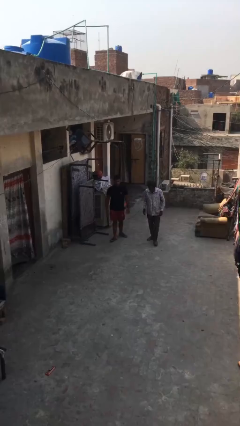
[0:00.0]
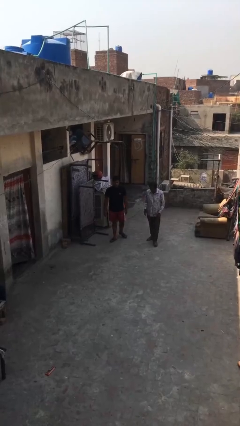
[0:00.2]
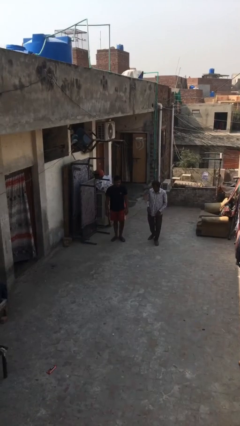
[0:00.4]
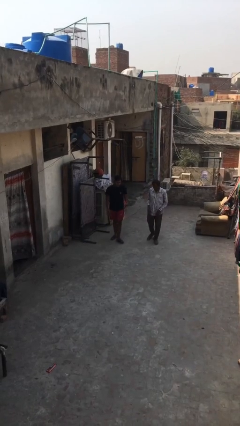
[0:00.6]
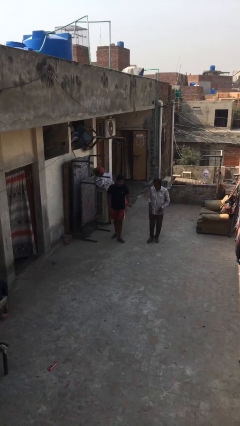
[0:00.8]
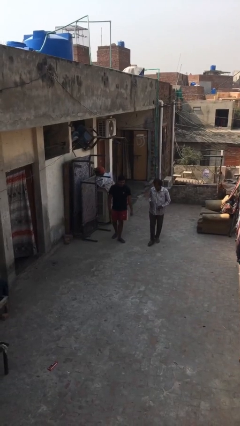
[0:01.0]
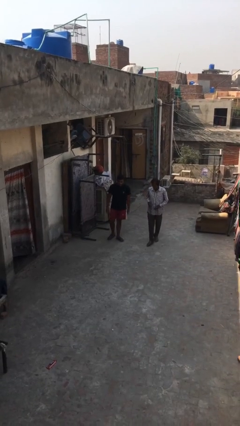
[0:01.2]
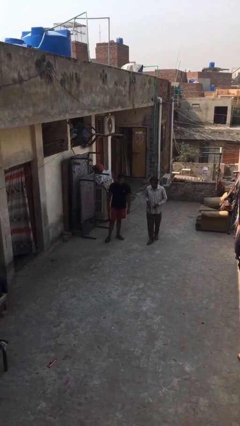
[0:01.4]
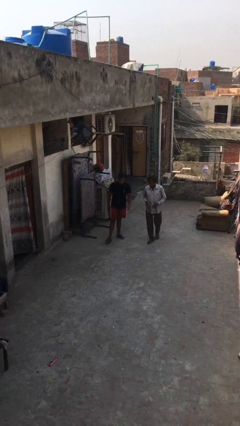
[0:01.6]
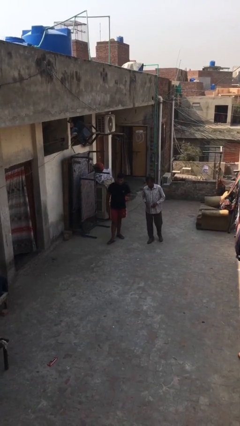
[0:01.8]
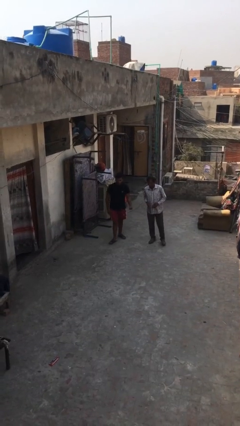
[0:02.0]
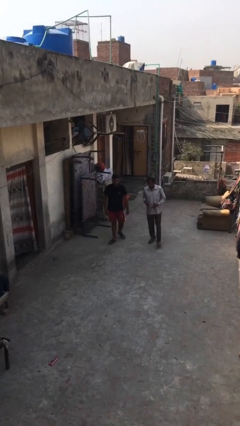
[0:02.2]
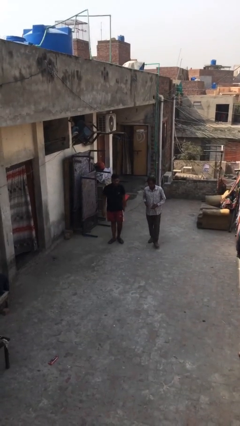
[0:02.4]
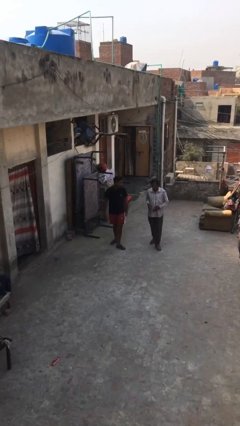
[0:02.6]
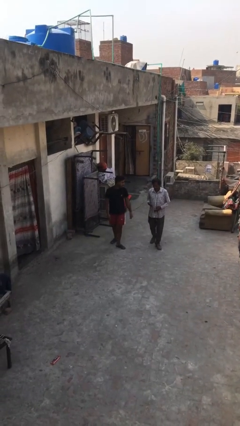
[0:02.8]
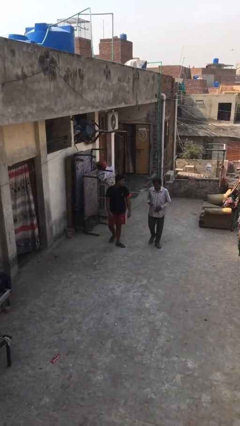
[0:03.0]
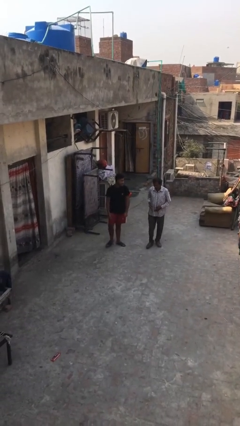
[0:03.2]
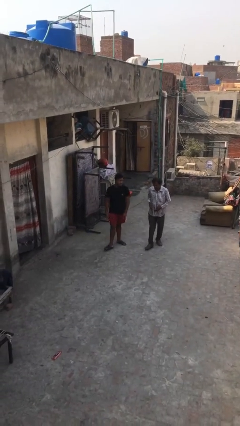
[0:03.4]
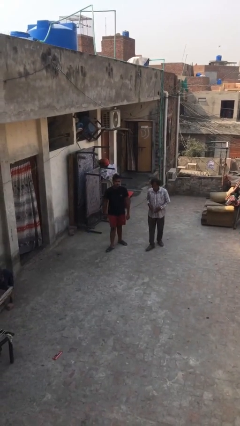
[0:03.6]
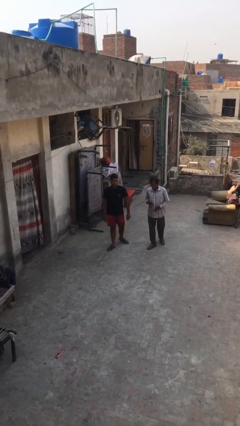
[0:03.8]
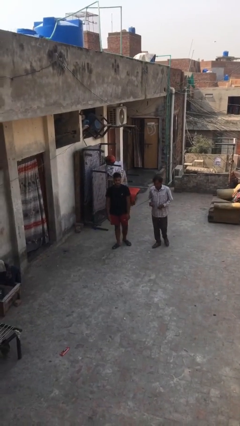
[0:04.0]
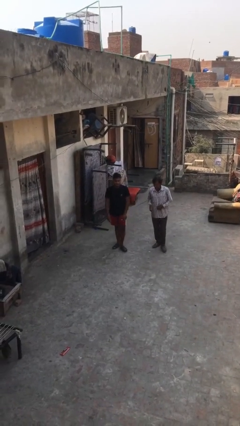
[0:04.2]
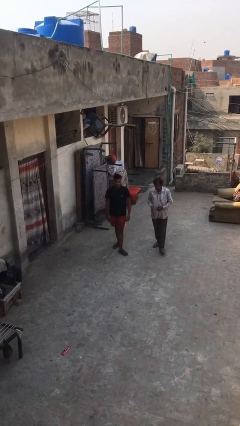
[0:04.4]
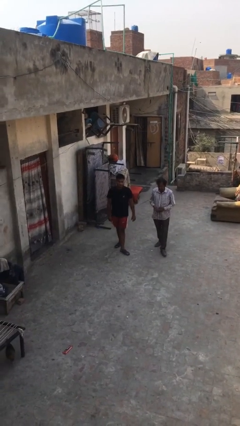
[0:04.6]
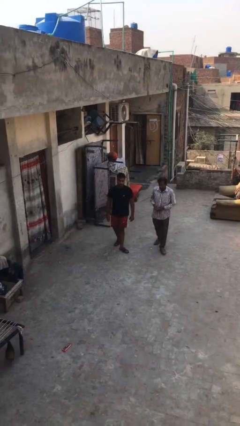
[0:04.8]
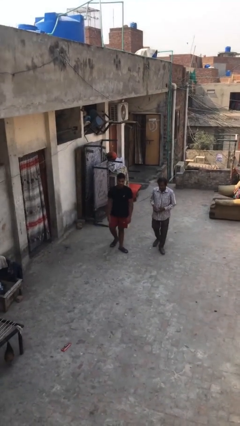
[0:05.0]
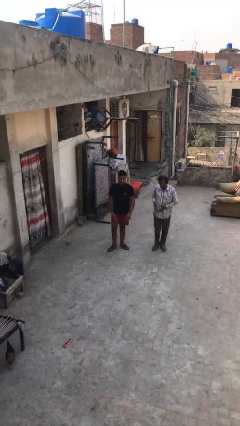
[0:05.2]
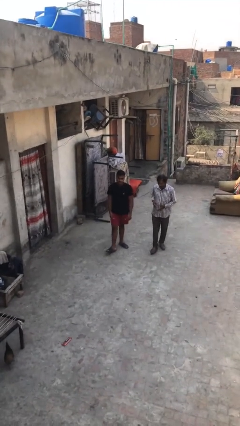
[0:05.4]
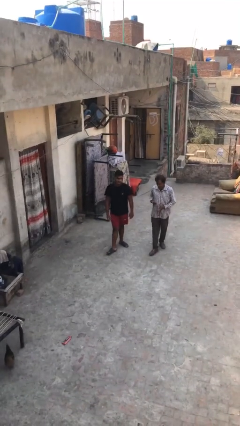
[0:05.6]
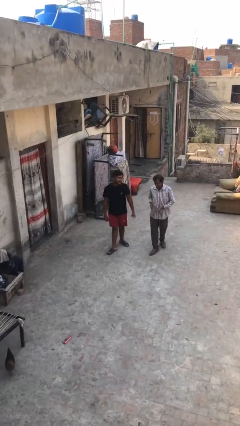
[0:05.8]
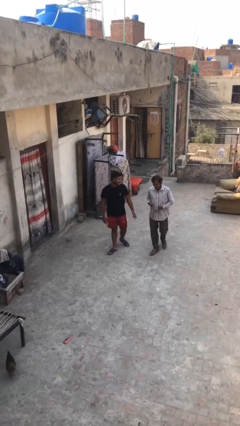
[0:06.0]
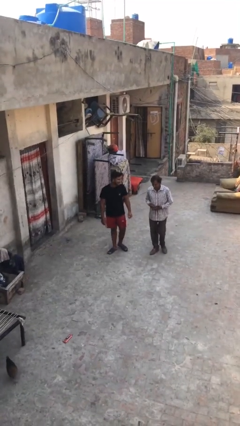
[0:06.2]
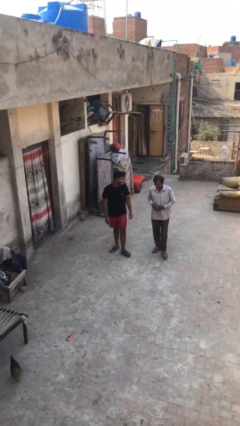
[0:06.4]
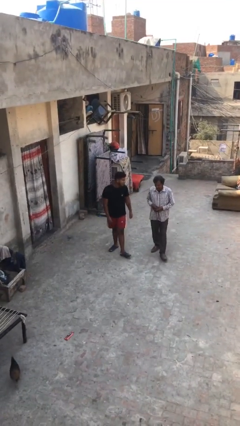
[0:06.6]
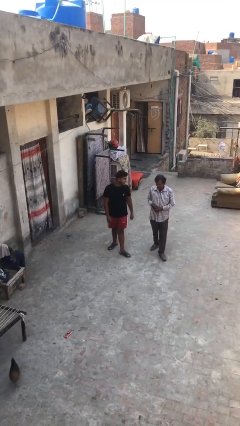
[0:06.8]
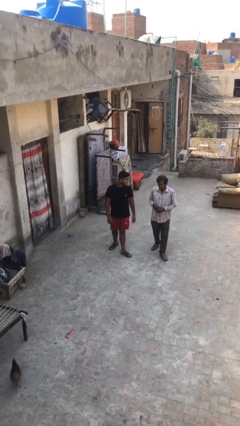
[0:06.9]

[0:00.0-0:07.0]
person talks to person

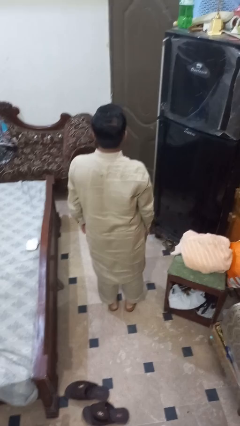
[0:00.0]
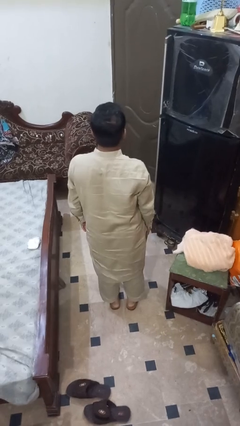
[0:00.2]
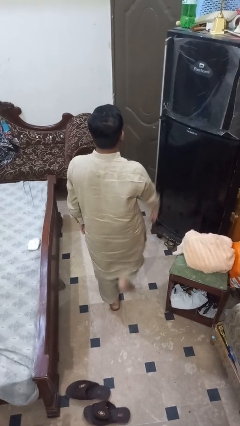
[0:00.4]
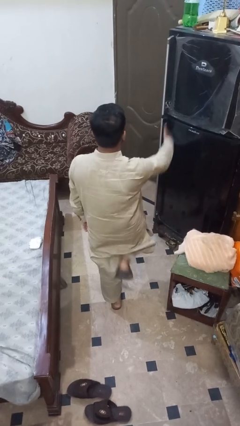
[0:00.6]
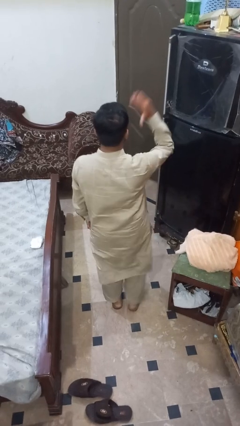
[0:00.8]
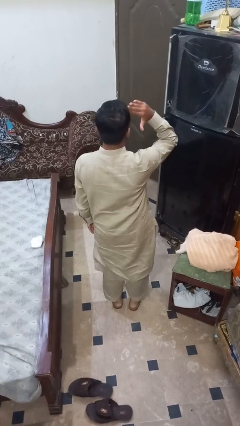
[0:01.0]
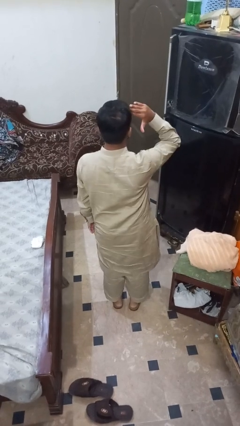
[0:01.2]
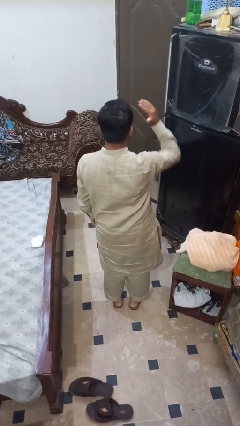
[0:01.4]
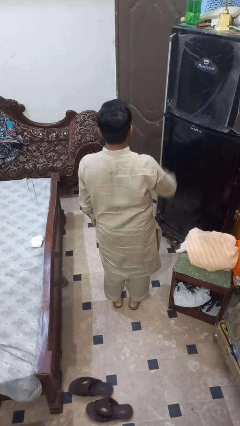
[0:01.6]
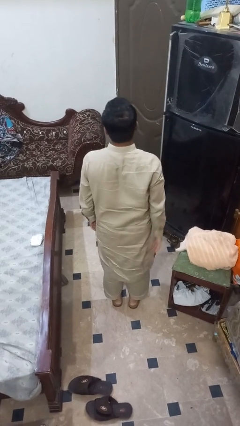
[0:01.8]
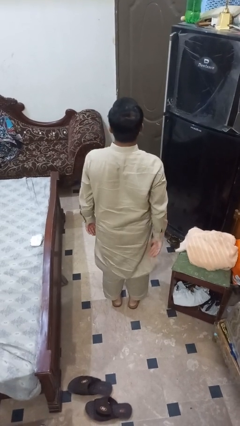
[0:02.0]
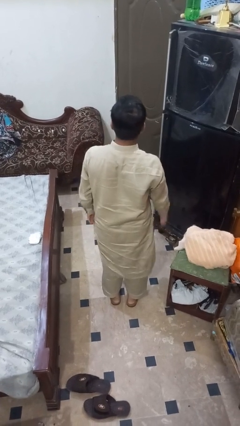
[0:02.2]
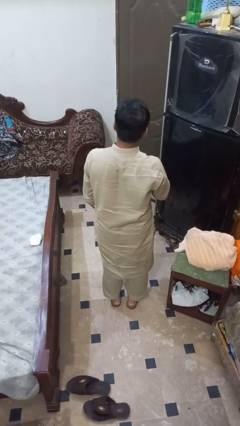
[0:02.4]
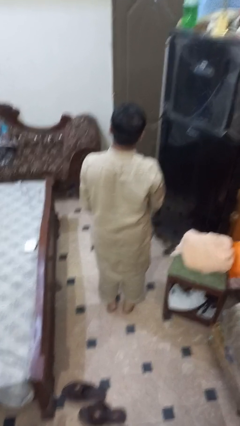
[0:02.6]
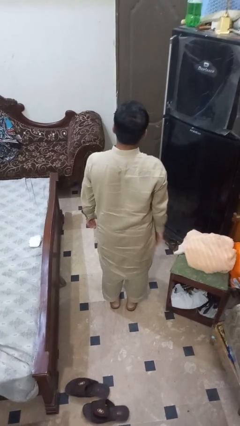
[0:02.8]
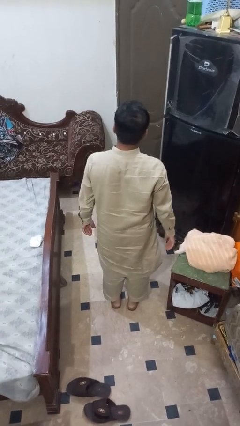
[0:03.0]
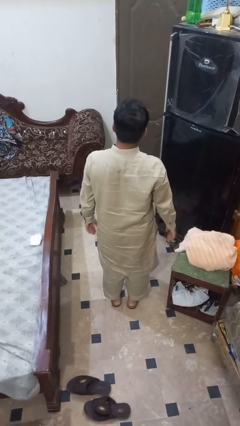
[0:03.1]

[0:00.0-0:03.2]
person salutes

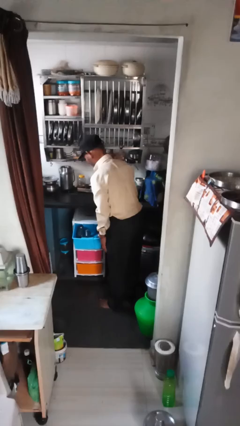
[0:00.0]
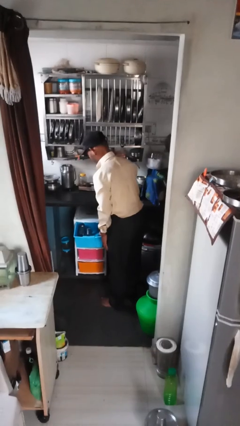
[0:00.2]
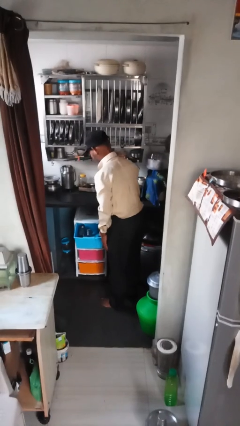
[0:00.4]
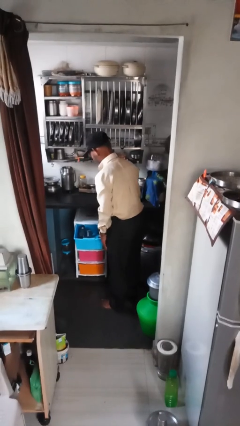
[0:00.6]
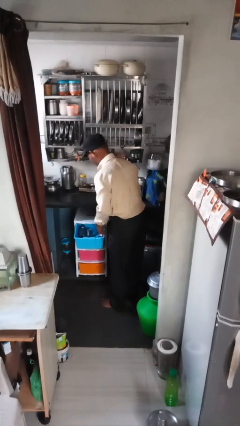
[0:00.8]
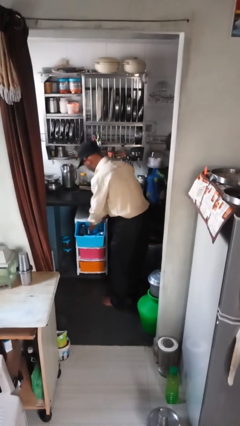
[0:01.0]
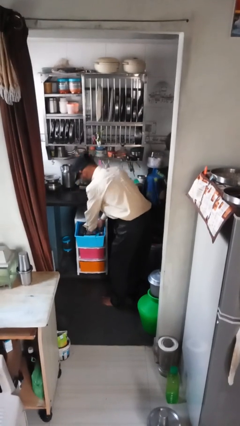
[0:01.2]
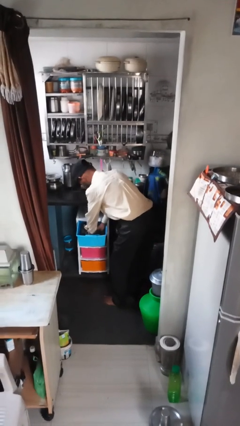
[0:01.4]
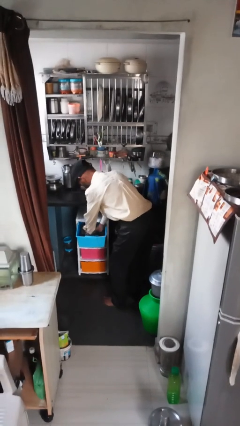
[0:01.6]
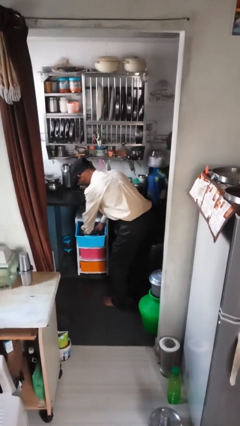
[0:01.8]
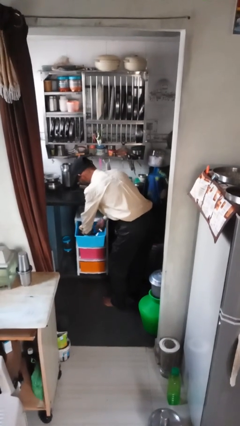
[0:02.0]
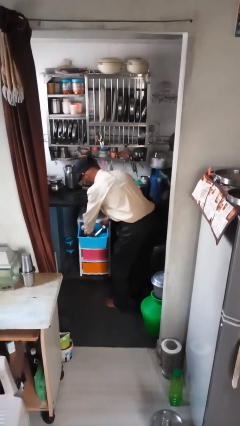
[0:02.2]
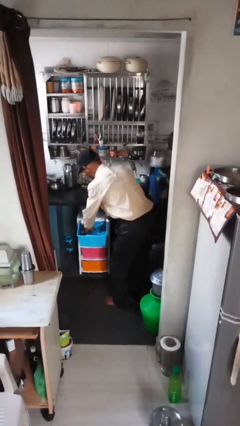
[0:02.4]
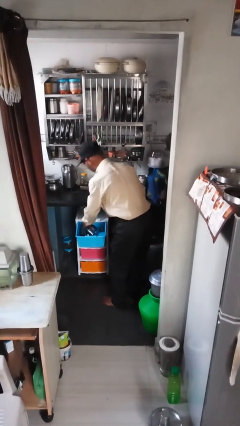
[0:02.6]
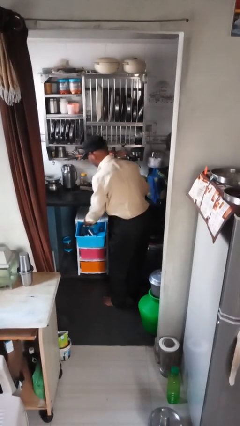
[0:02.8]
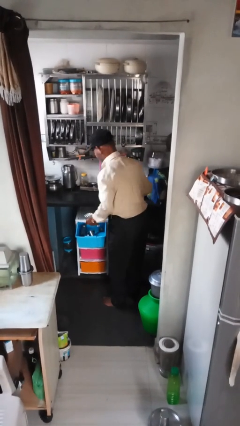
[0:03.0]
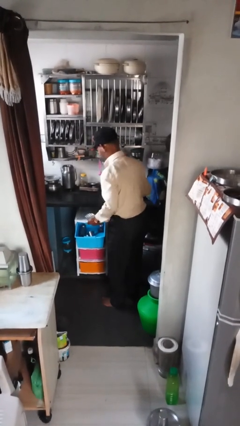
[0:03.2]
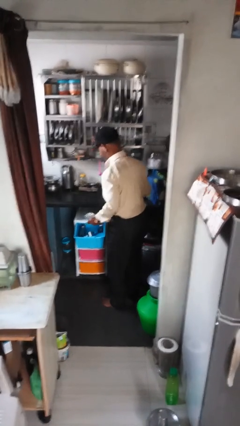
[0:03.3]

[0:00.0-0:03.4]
person takes object from kitchen drawer

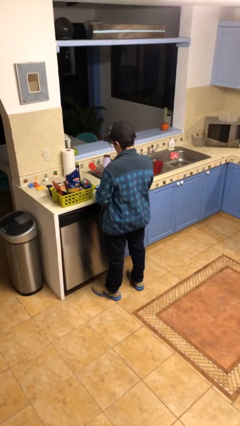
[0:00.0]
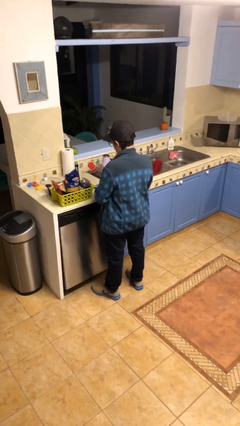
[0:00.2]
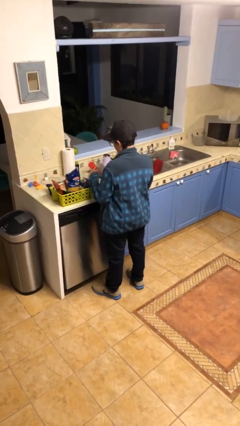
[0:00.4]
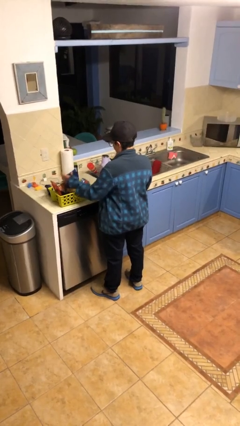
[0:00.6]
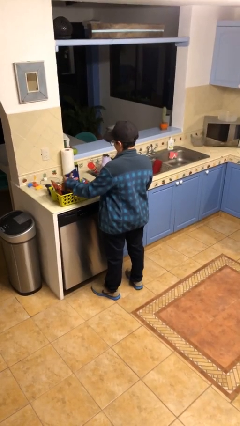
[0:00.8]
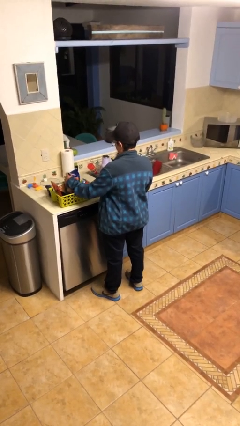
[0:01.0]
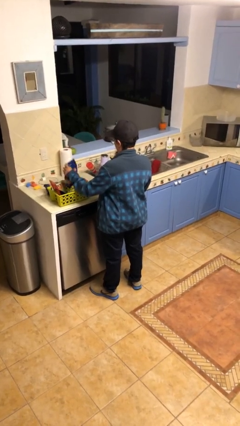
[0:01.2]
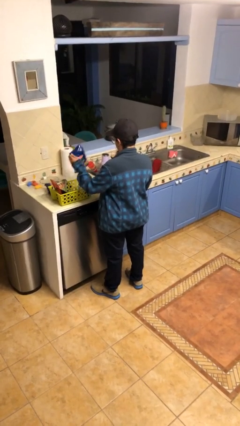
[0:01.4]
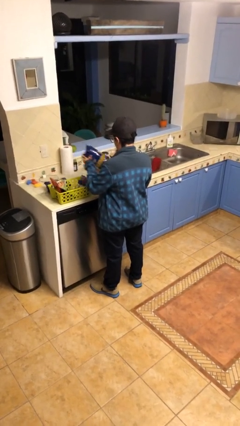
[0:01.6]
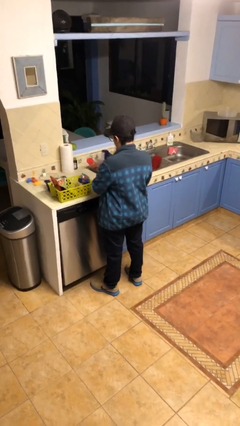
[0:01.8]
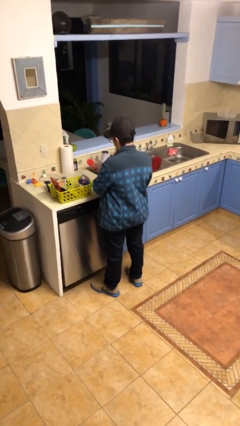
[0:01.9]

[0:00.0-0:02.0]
person takes object from basket

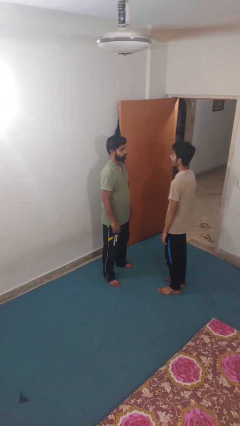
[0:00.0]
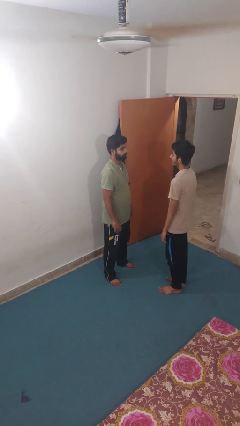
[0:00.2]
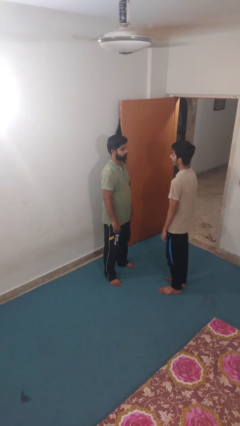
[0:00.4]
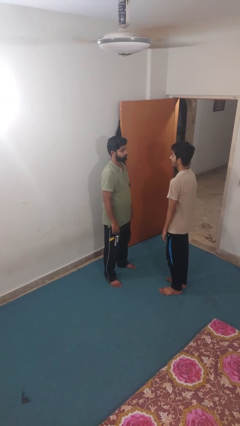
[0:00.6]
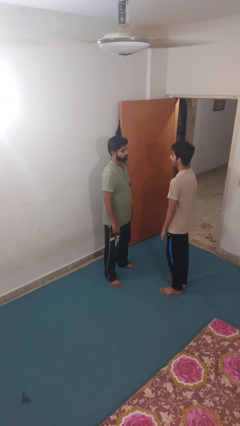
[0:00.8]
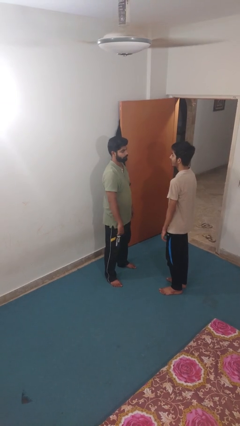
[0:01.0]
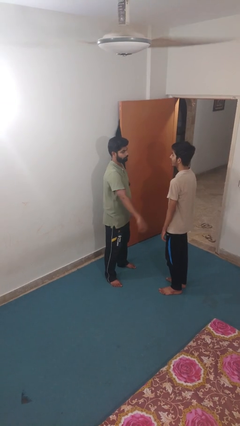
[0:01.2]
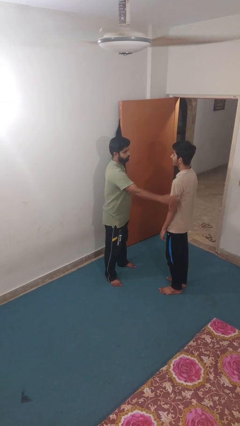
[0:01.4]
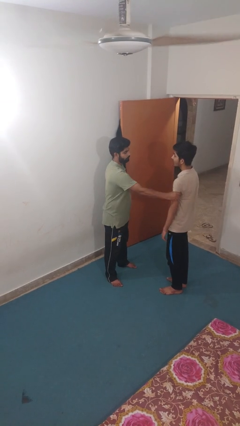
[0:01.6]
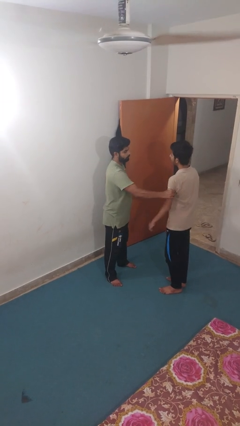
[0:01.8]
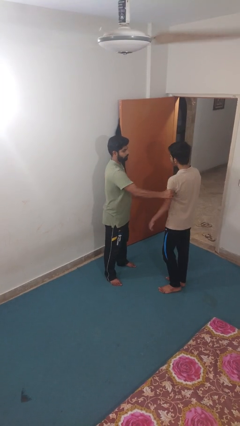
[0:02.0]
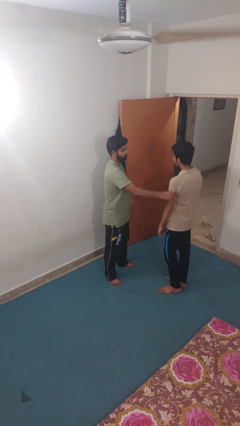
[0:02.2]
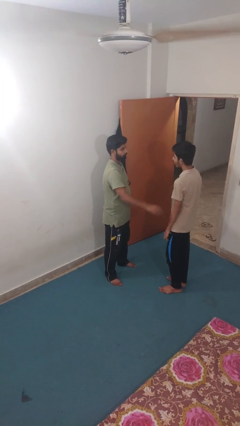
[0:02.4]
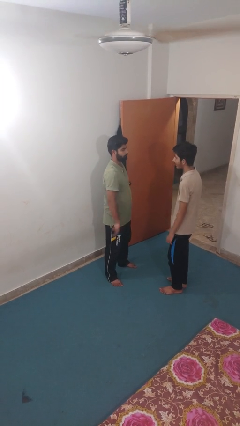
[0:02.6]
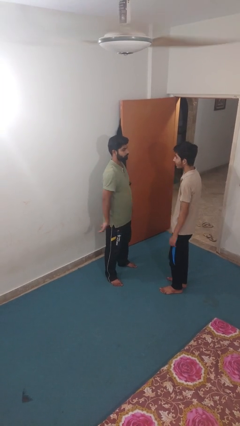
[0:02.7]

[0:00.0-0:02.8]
person grabs person by bicep
